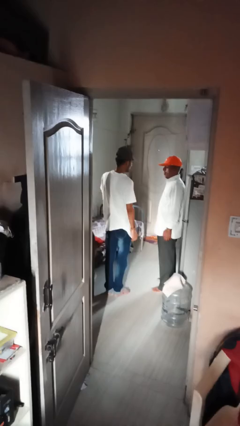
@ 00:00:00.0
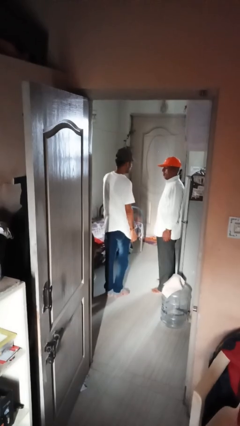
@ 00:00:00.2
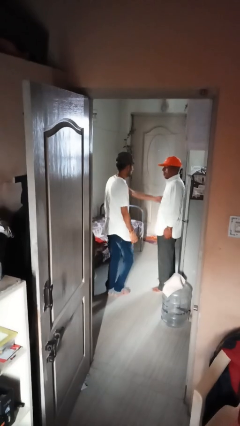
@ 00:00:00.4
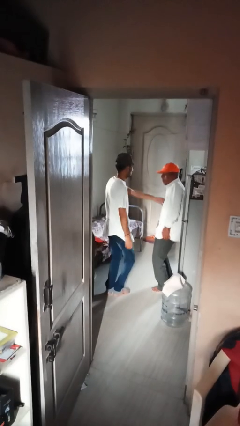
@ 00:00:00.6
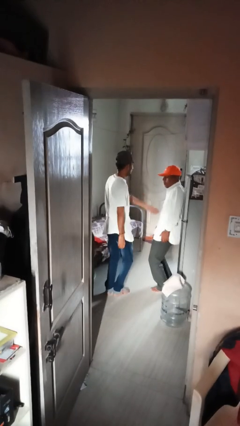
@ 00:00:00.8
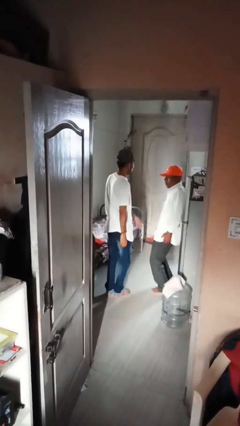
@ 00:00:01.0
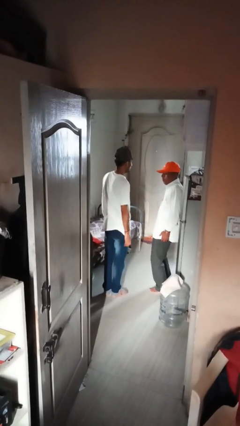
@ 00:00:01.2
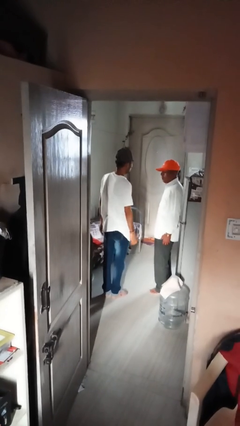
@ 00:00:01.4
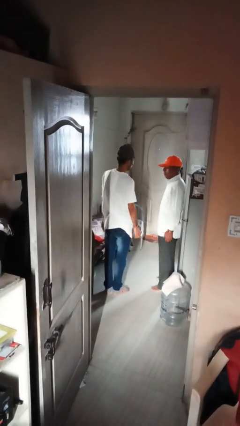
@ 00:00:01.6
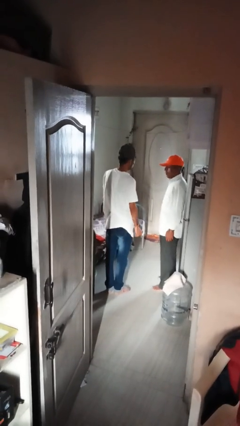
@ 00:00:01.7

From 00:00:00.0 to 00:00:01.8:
person tickles person

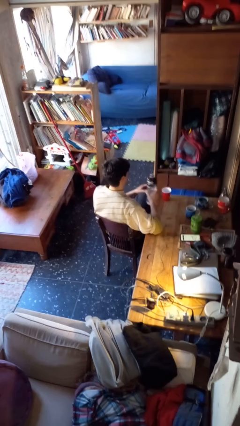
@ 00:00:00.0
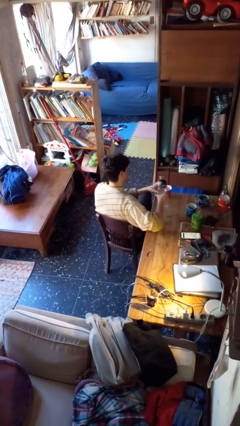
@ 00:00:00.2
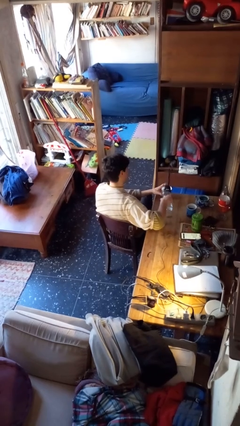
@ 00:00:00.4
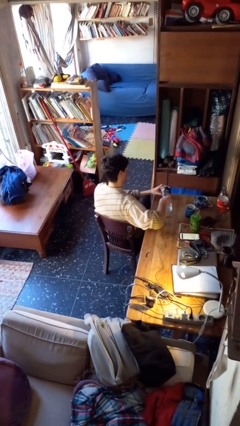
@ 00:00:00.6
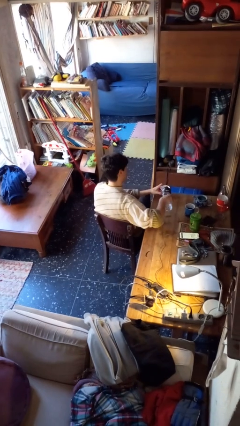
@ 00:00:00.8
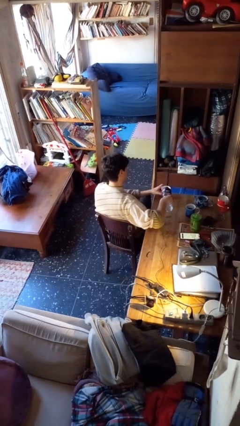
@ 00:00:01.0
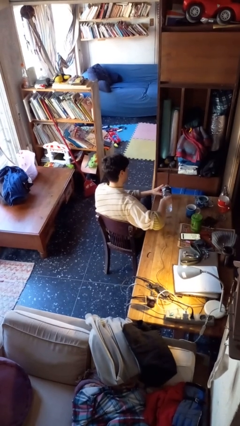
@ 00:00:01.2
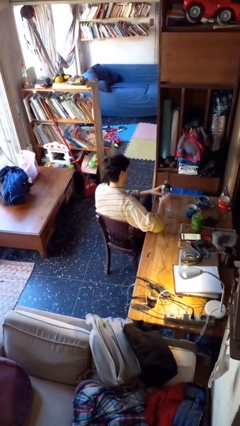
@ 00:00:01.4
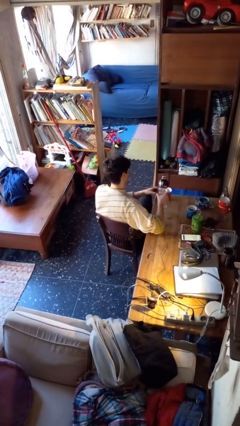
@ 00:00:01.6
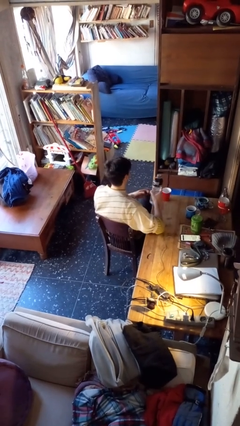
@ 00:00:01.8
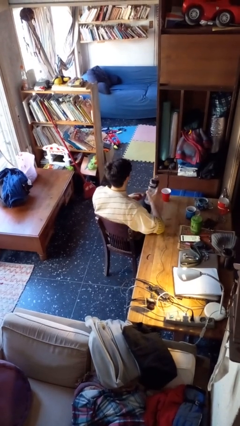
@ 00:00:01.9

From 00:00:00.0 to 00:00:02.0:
person pours liquid into cup

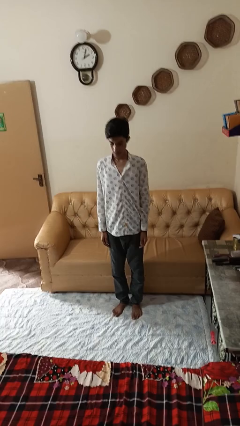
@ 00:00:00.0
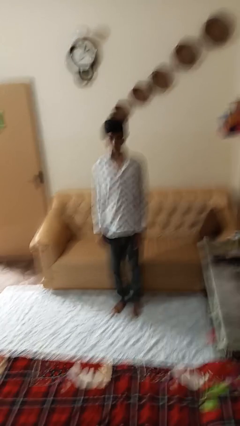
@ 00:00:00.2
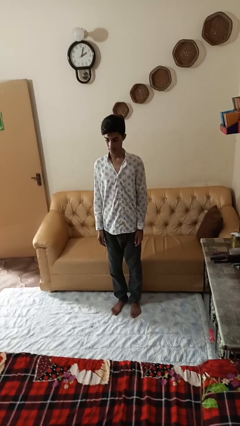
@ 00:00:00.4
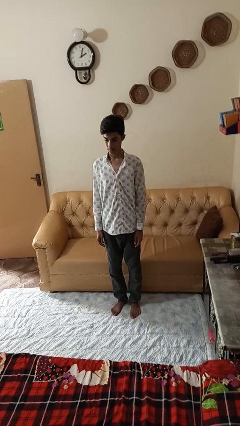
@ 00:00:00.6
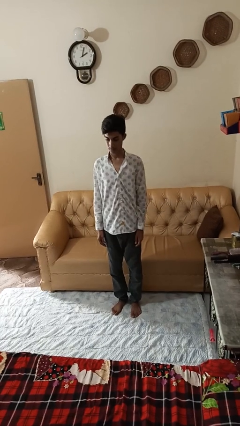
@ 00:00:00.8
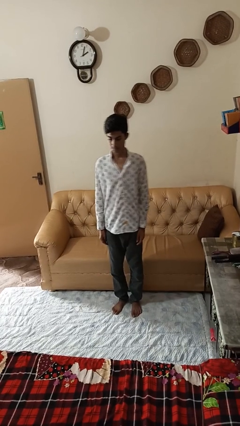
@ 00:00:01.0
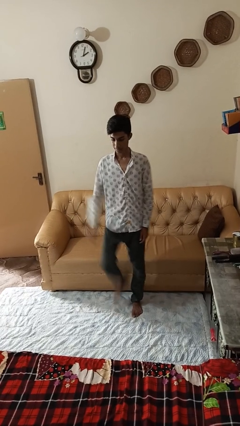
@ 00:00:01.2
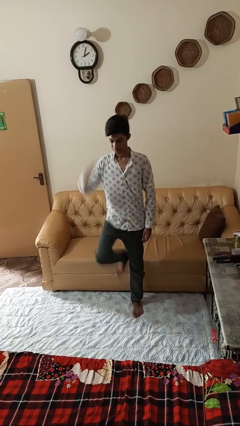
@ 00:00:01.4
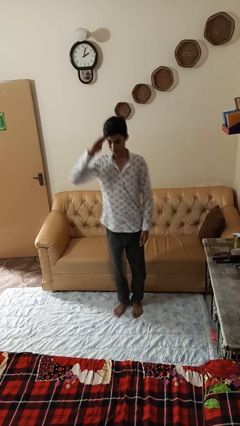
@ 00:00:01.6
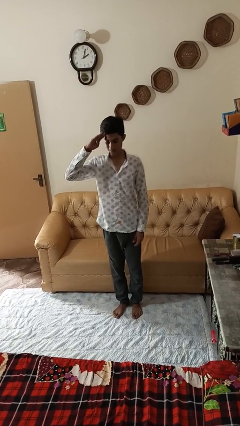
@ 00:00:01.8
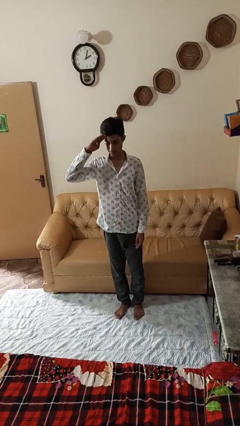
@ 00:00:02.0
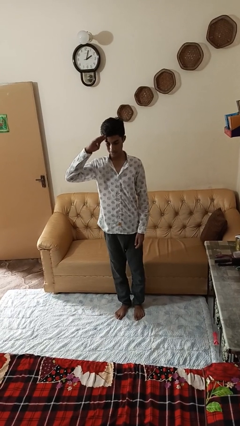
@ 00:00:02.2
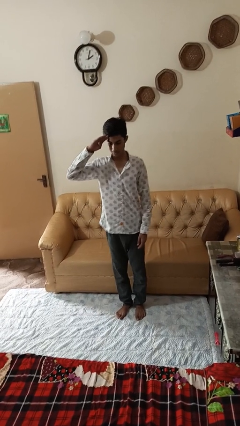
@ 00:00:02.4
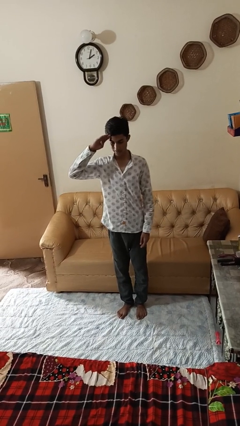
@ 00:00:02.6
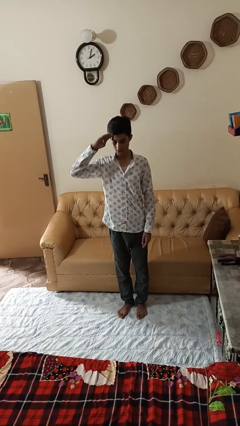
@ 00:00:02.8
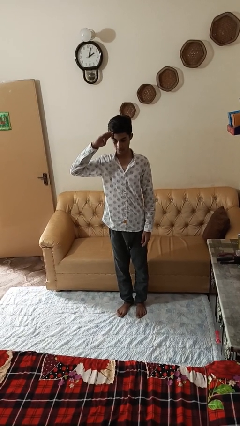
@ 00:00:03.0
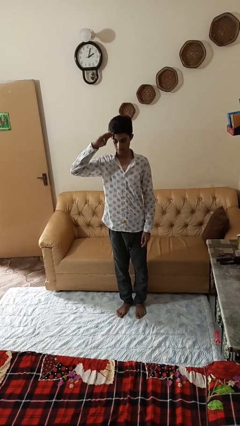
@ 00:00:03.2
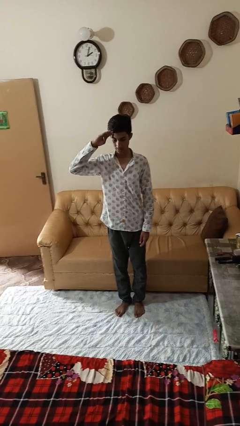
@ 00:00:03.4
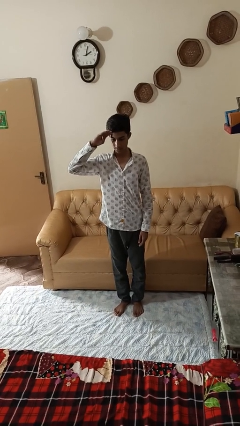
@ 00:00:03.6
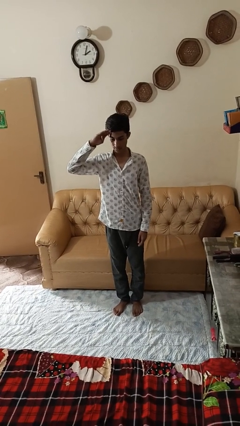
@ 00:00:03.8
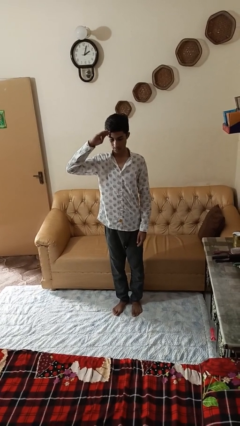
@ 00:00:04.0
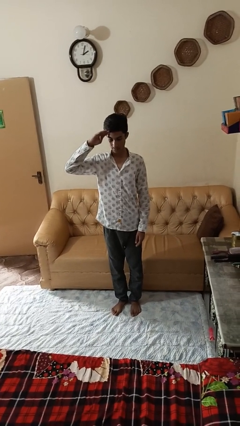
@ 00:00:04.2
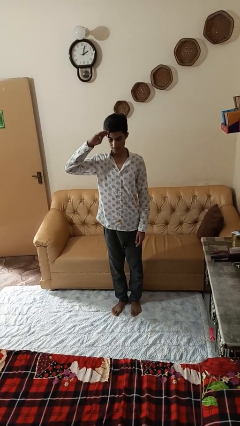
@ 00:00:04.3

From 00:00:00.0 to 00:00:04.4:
person salutes

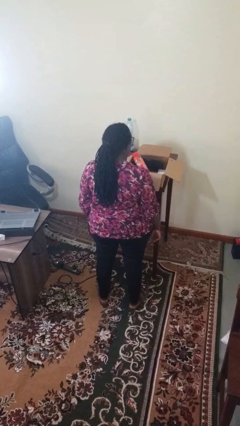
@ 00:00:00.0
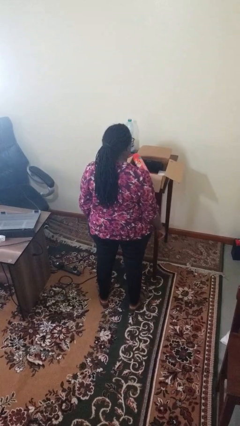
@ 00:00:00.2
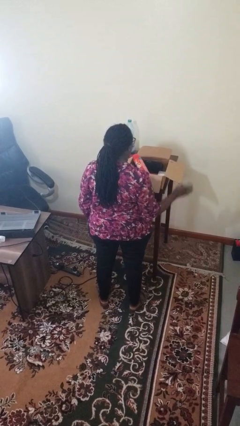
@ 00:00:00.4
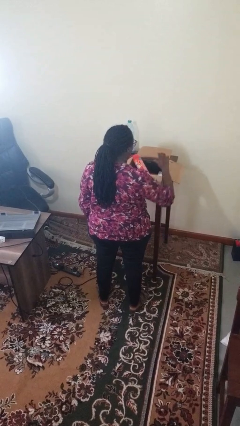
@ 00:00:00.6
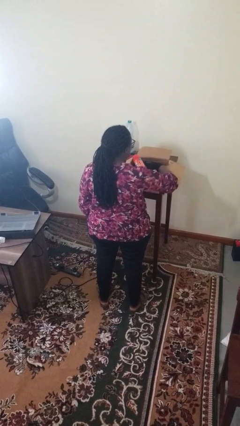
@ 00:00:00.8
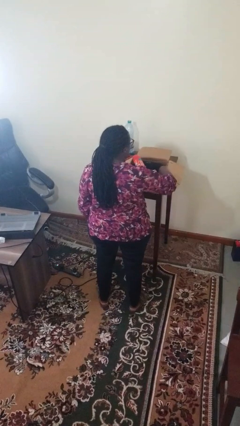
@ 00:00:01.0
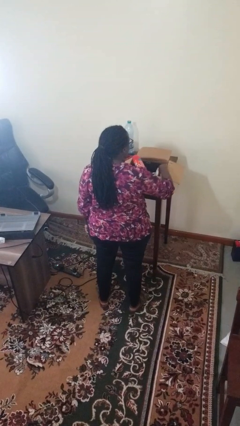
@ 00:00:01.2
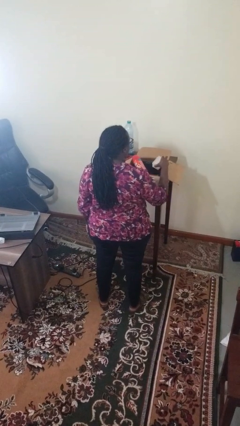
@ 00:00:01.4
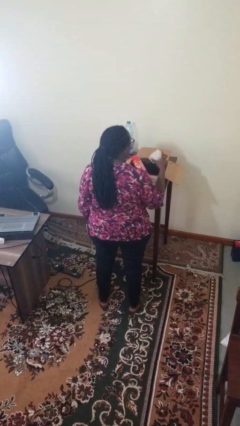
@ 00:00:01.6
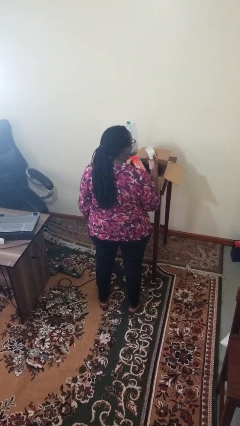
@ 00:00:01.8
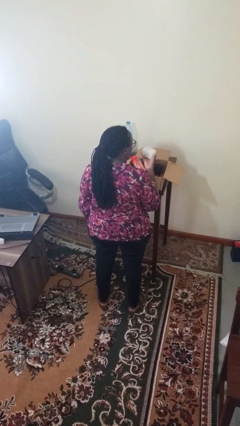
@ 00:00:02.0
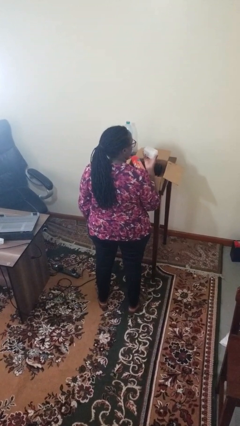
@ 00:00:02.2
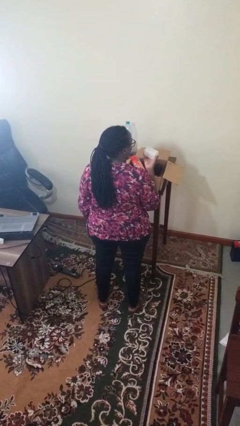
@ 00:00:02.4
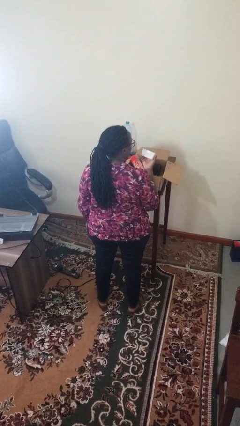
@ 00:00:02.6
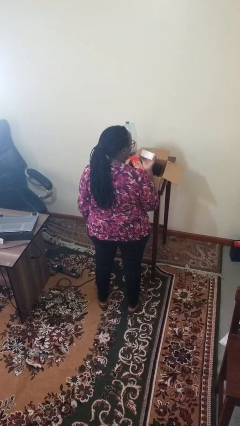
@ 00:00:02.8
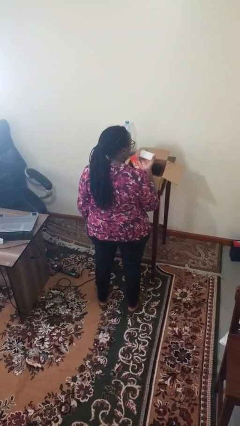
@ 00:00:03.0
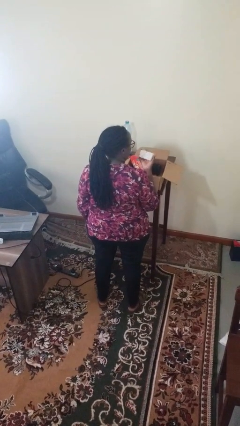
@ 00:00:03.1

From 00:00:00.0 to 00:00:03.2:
person takes object from box

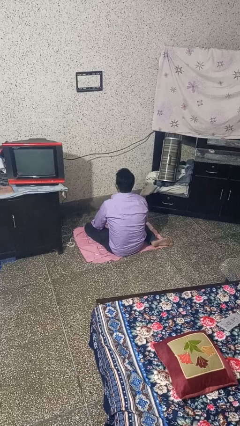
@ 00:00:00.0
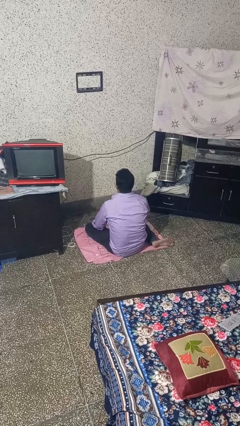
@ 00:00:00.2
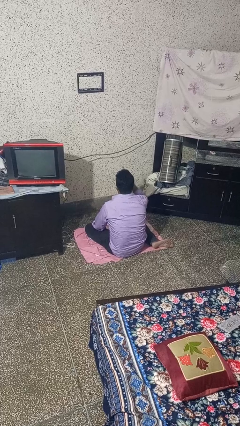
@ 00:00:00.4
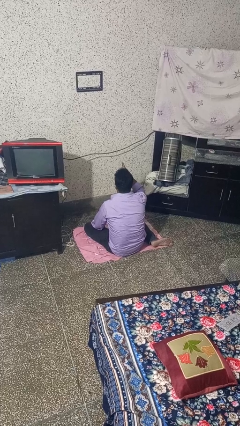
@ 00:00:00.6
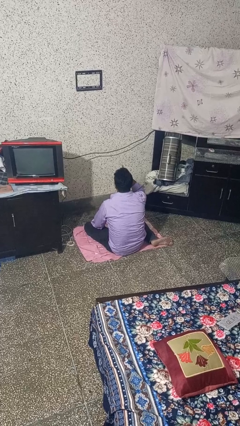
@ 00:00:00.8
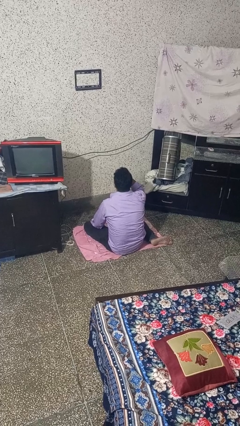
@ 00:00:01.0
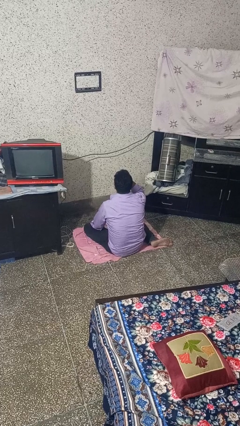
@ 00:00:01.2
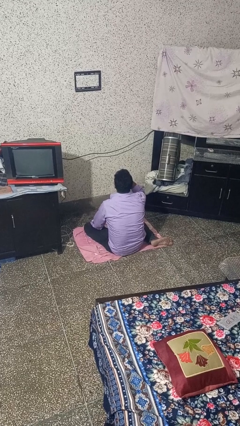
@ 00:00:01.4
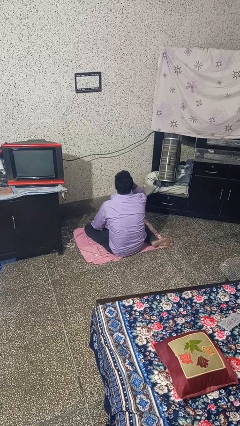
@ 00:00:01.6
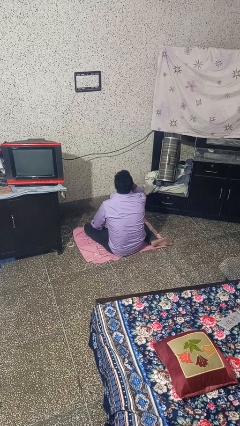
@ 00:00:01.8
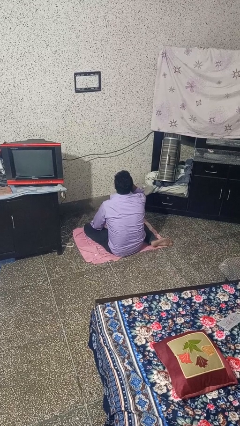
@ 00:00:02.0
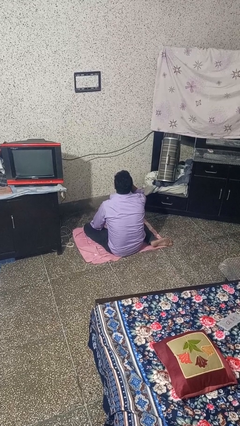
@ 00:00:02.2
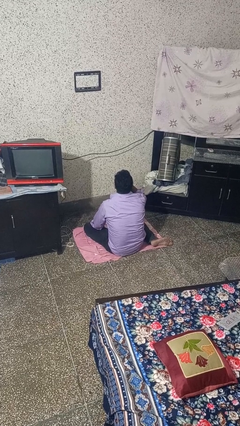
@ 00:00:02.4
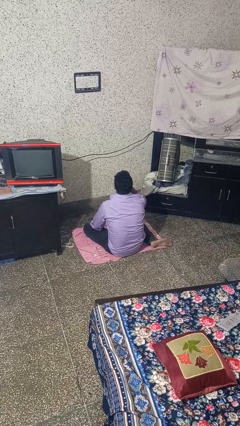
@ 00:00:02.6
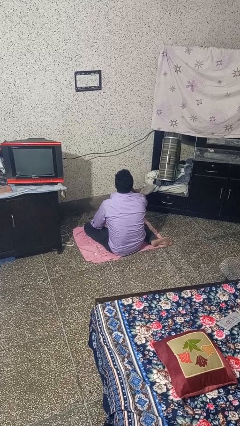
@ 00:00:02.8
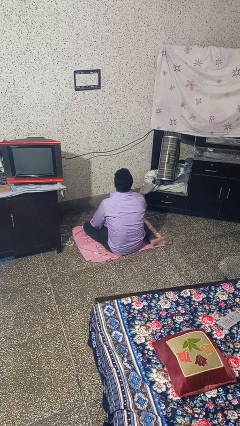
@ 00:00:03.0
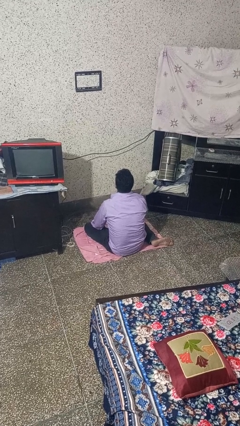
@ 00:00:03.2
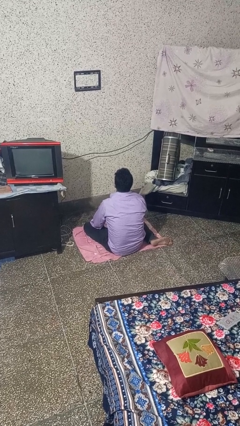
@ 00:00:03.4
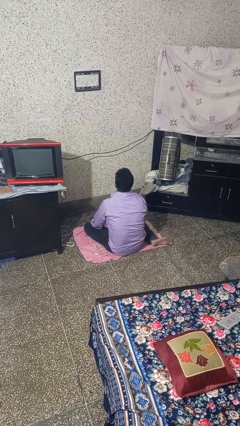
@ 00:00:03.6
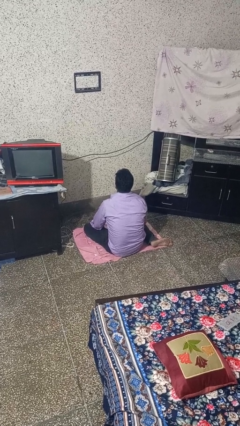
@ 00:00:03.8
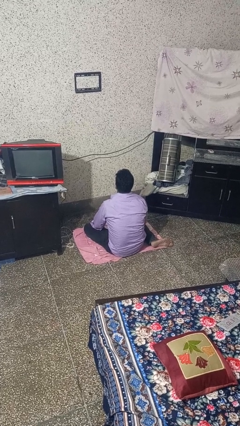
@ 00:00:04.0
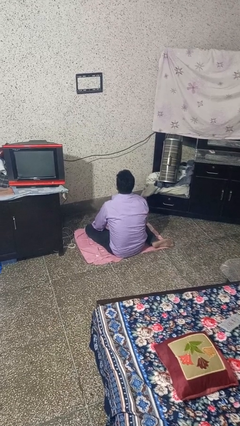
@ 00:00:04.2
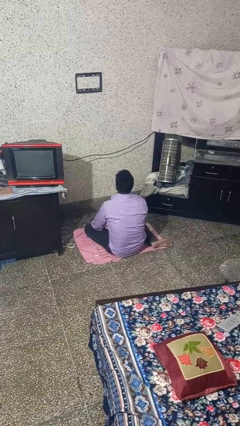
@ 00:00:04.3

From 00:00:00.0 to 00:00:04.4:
person licks fingers

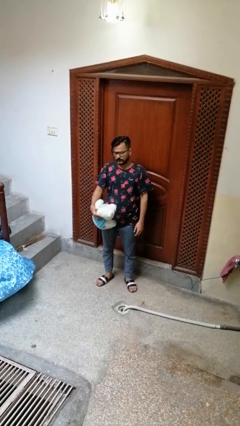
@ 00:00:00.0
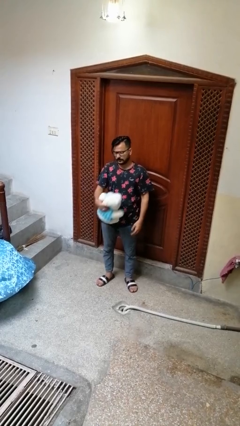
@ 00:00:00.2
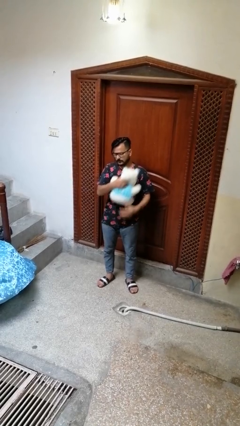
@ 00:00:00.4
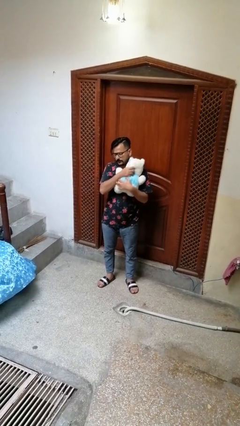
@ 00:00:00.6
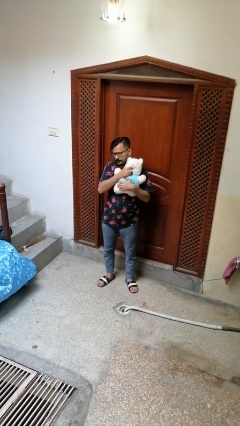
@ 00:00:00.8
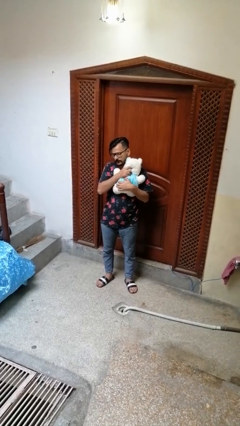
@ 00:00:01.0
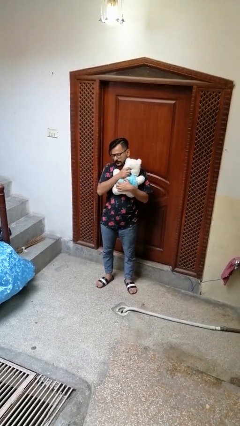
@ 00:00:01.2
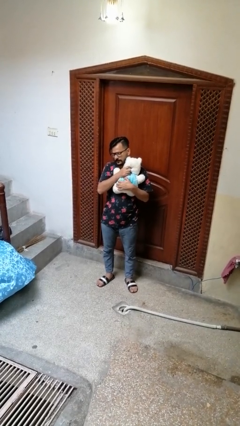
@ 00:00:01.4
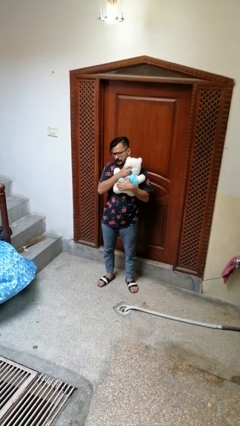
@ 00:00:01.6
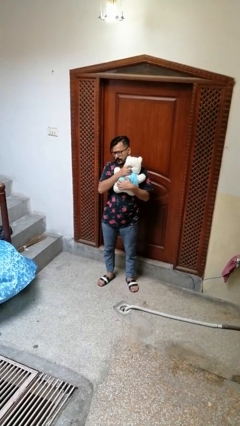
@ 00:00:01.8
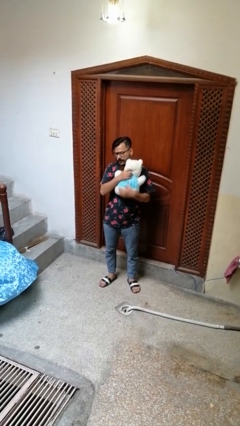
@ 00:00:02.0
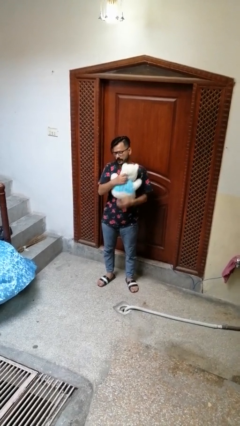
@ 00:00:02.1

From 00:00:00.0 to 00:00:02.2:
person hugs stuffed animal
